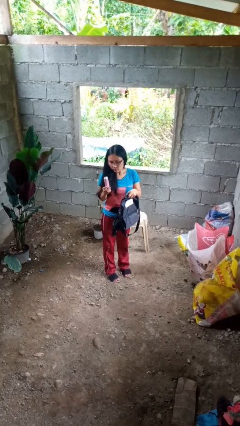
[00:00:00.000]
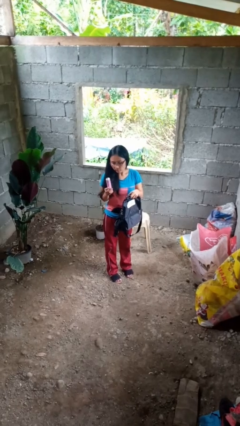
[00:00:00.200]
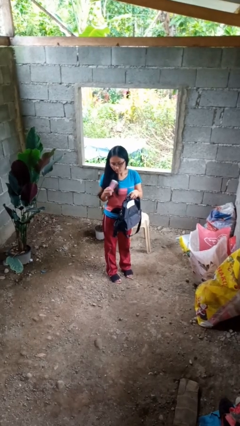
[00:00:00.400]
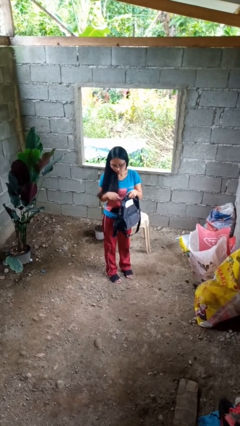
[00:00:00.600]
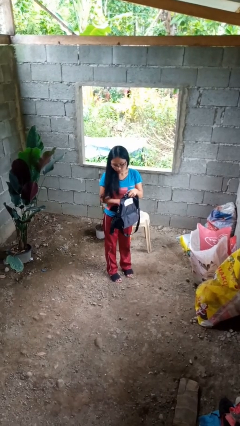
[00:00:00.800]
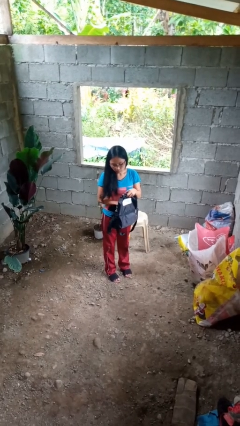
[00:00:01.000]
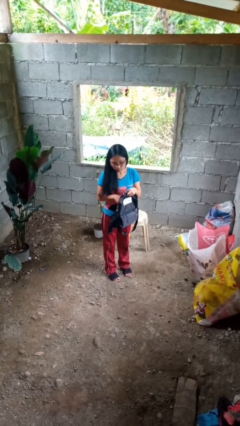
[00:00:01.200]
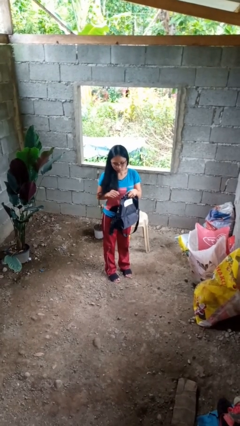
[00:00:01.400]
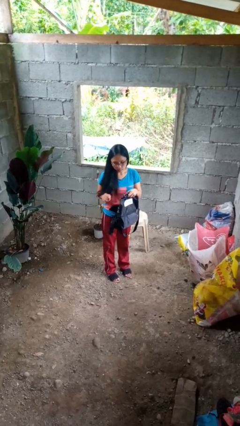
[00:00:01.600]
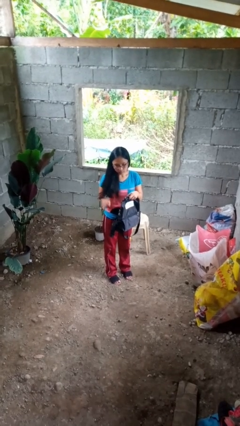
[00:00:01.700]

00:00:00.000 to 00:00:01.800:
person puts object into backpack

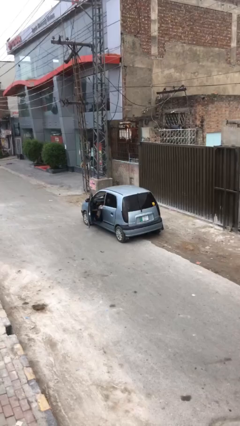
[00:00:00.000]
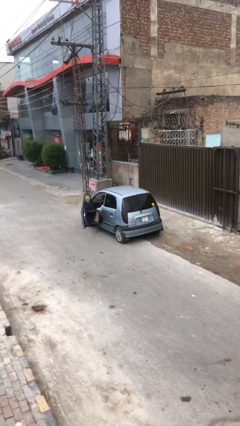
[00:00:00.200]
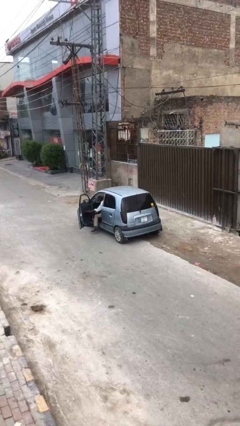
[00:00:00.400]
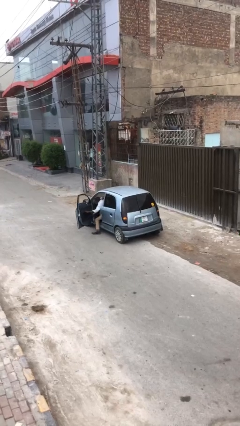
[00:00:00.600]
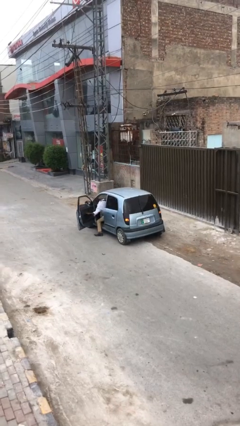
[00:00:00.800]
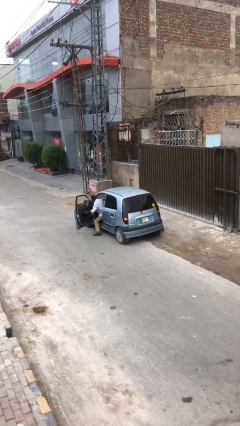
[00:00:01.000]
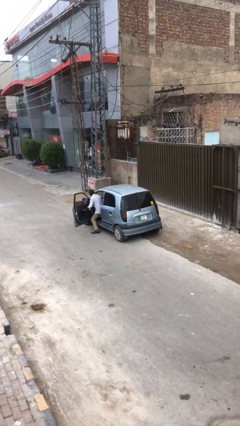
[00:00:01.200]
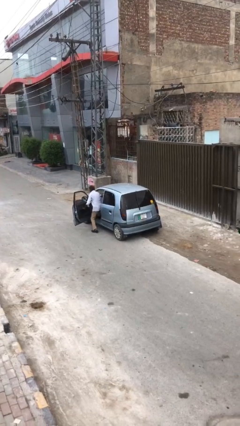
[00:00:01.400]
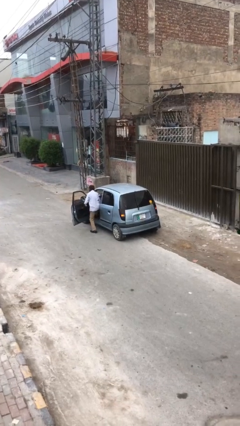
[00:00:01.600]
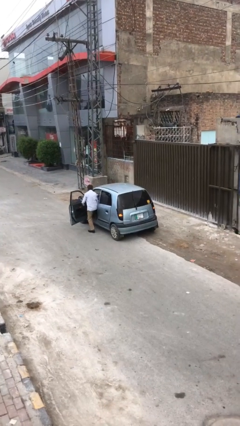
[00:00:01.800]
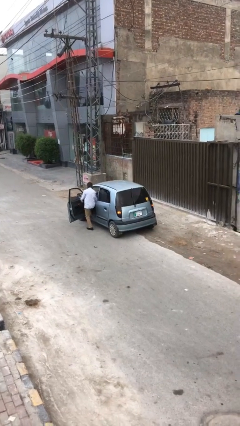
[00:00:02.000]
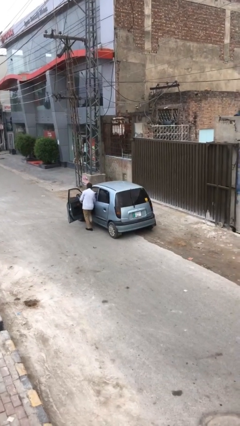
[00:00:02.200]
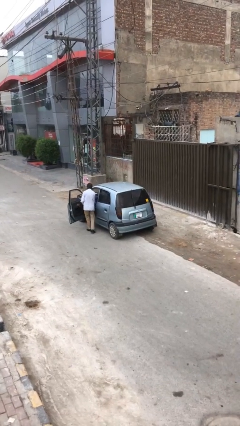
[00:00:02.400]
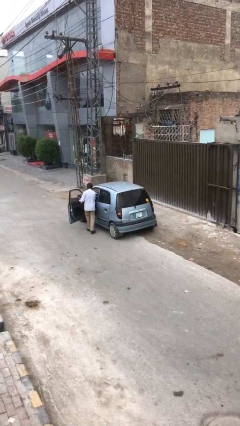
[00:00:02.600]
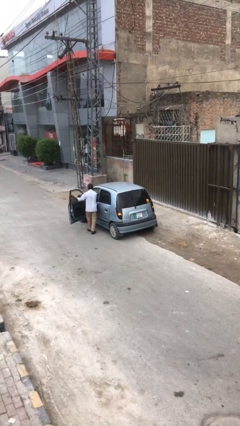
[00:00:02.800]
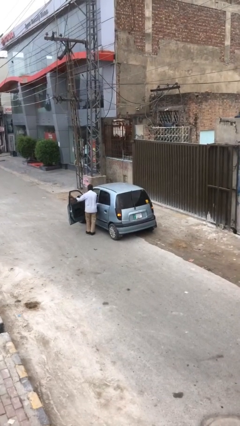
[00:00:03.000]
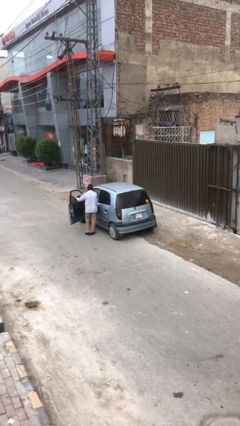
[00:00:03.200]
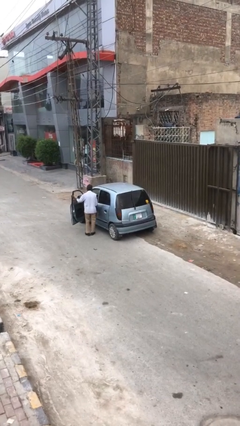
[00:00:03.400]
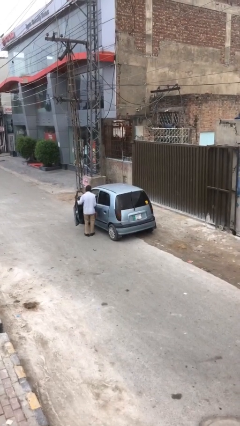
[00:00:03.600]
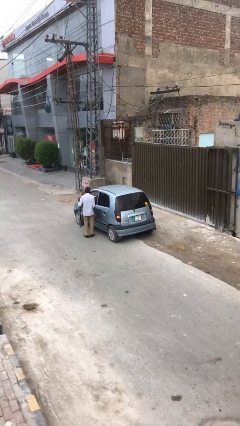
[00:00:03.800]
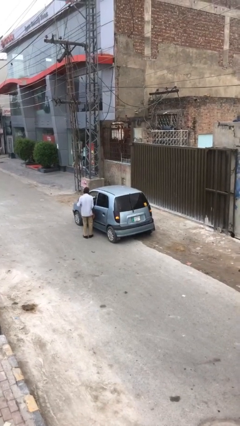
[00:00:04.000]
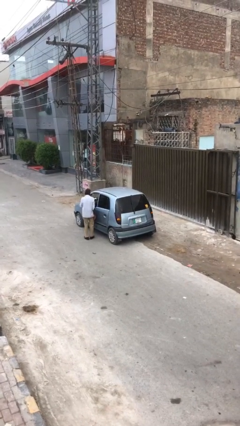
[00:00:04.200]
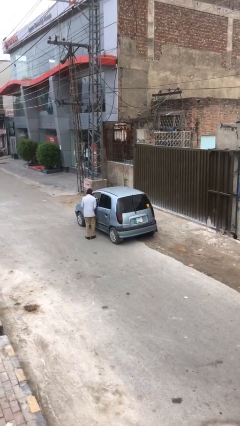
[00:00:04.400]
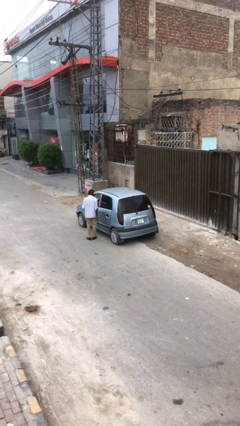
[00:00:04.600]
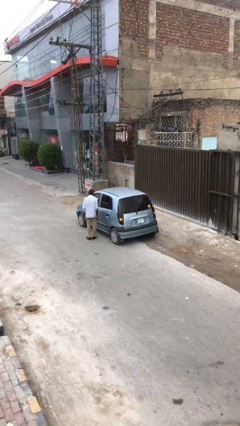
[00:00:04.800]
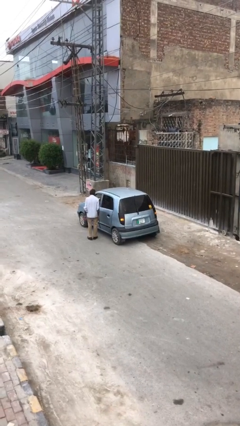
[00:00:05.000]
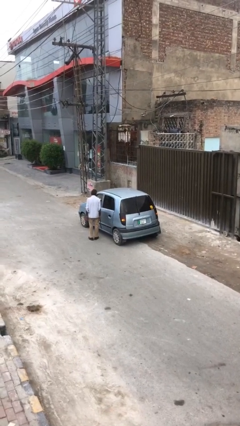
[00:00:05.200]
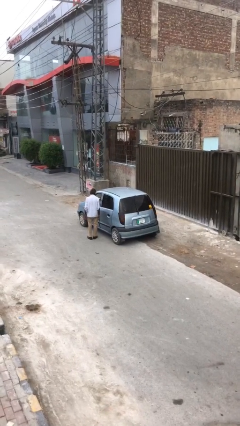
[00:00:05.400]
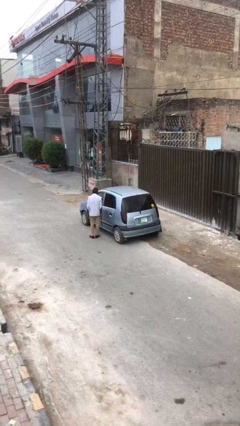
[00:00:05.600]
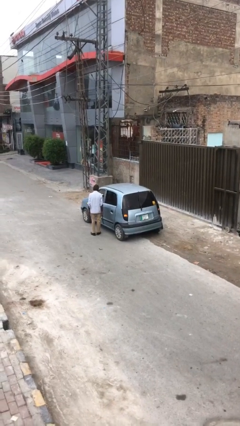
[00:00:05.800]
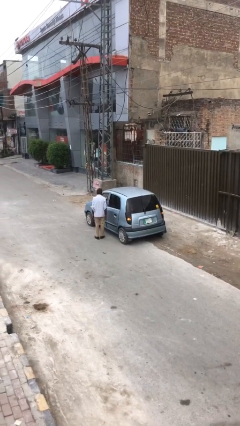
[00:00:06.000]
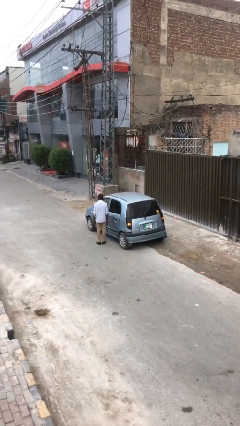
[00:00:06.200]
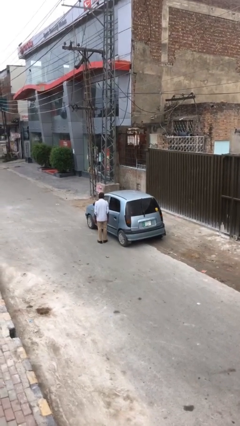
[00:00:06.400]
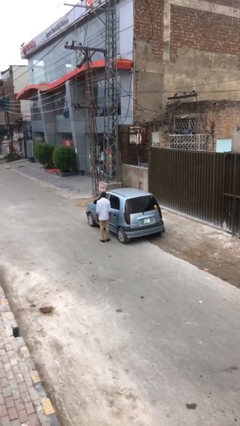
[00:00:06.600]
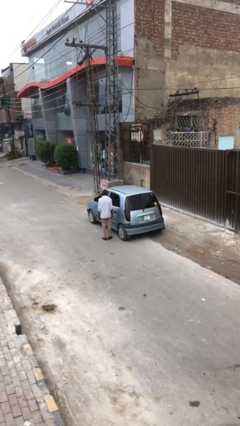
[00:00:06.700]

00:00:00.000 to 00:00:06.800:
car drops off person

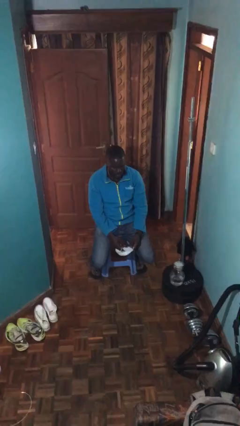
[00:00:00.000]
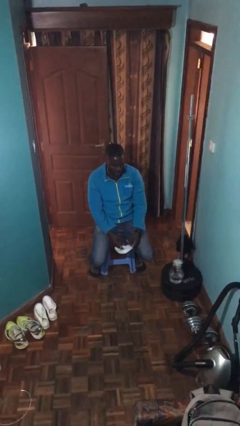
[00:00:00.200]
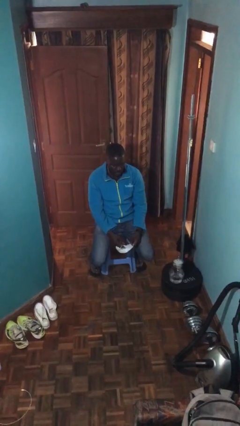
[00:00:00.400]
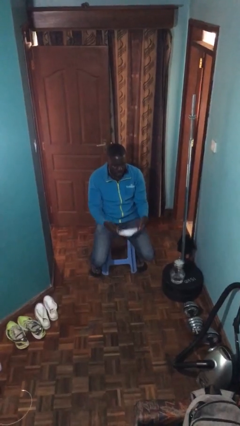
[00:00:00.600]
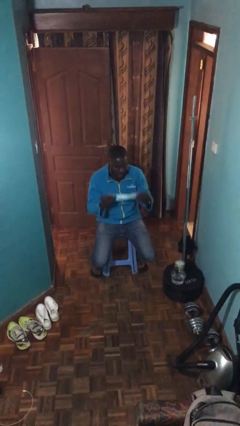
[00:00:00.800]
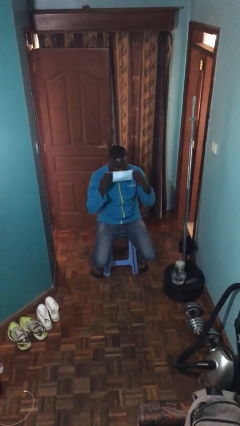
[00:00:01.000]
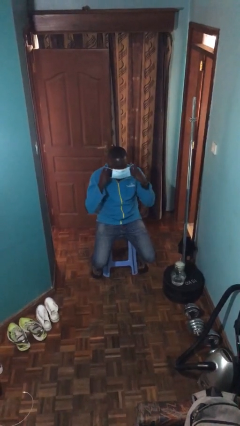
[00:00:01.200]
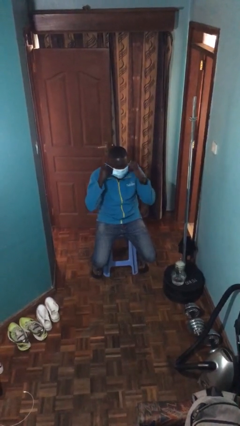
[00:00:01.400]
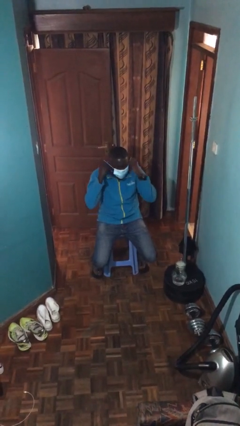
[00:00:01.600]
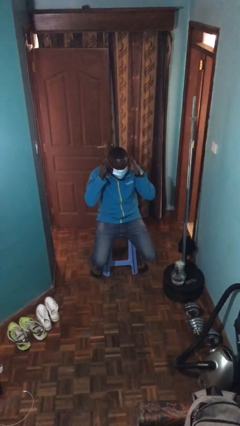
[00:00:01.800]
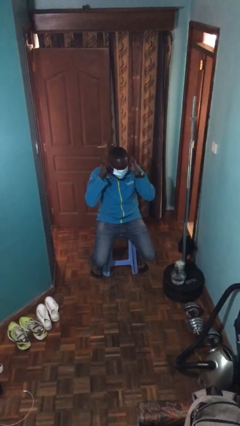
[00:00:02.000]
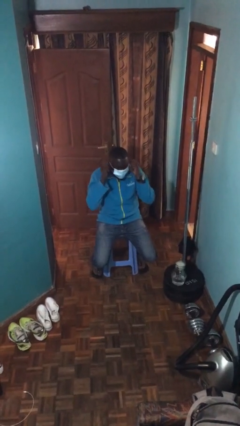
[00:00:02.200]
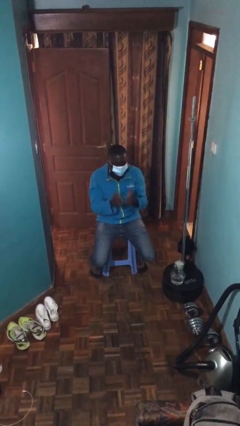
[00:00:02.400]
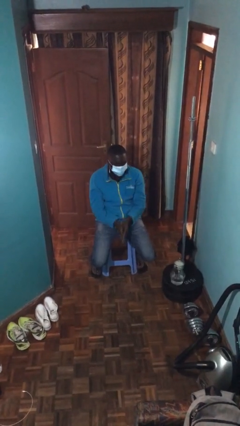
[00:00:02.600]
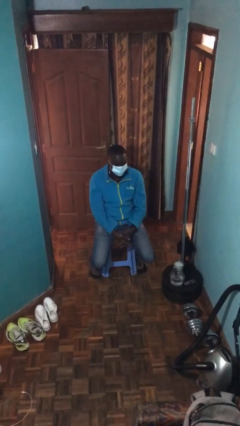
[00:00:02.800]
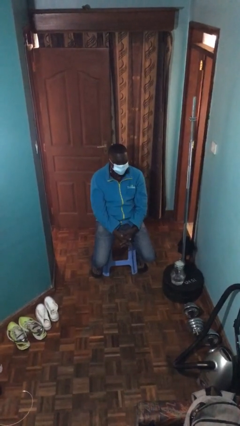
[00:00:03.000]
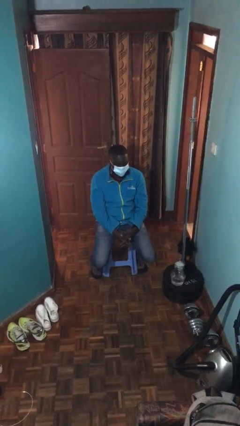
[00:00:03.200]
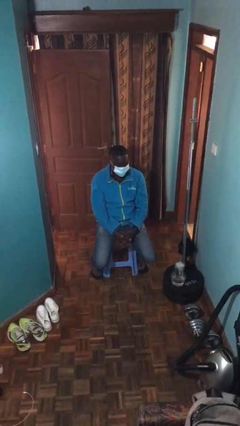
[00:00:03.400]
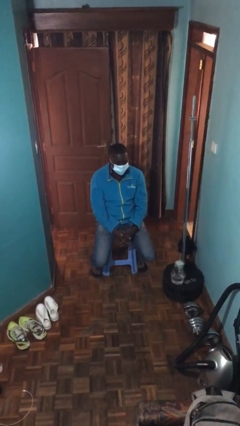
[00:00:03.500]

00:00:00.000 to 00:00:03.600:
person puts on facemask

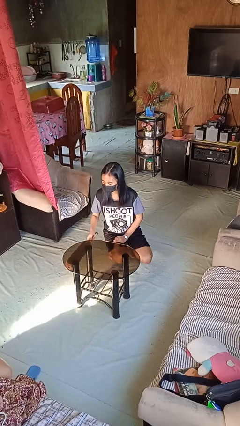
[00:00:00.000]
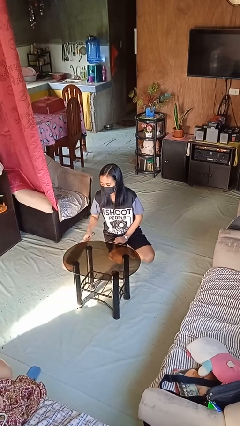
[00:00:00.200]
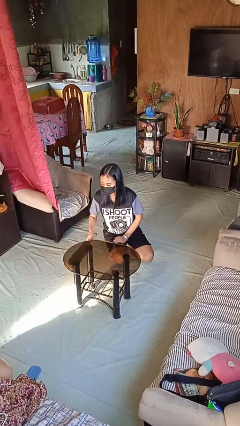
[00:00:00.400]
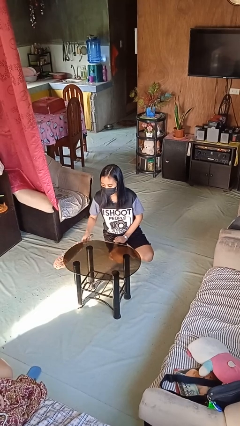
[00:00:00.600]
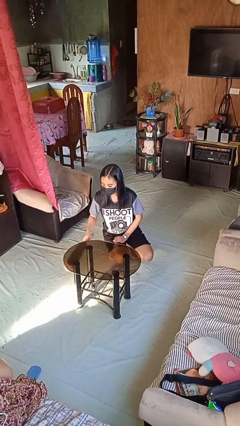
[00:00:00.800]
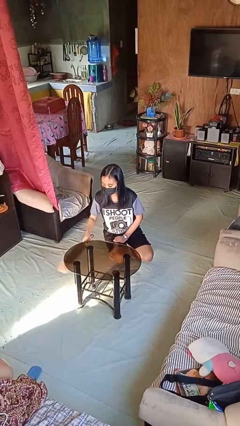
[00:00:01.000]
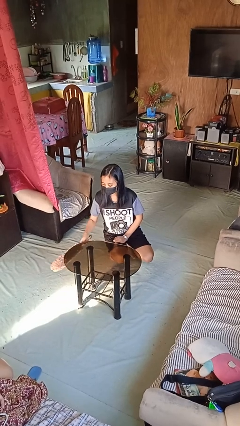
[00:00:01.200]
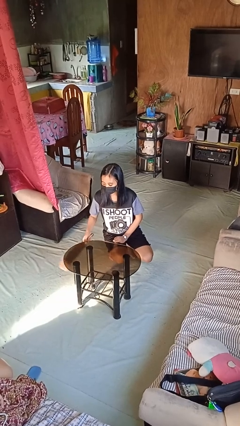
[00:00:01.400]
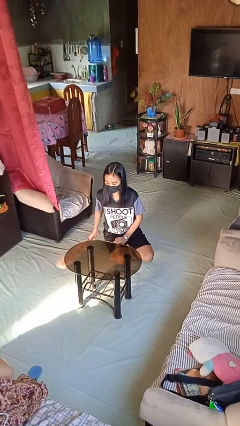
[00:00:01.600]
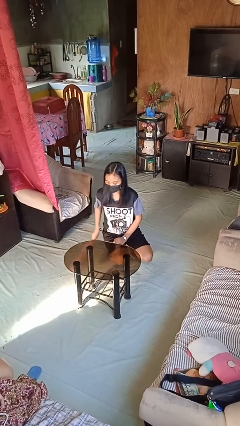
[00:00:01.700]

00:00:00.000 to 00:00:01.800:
person dusts furniture

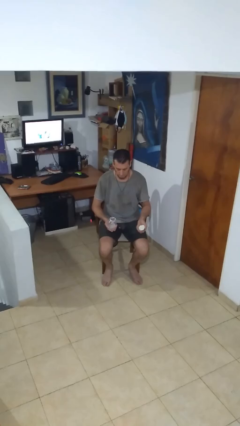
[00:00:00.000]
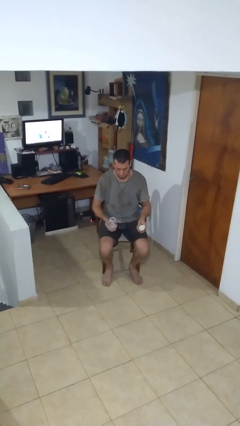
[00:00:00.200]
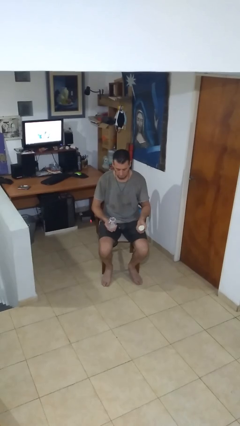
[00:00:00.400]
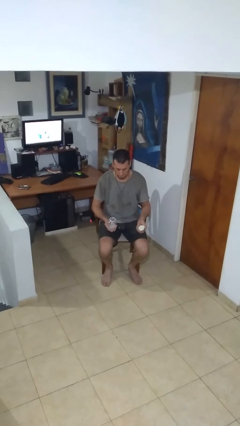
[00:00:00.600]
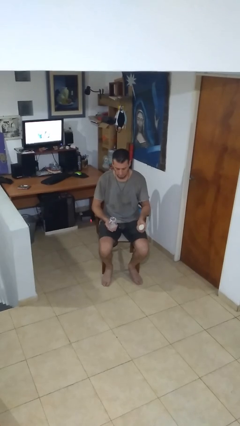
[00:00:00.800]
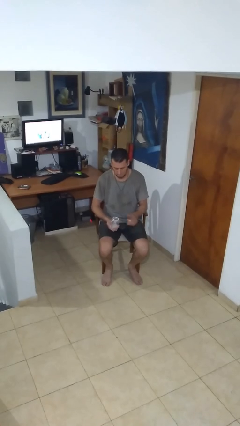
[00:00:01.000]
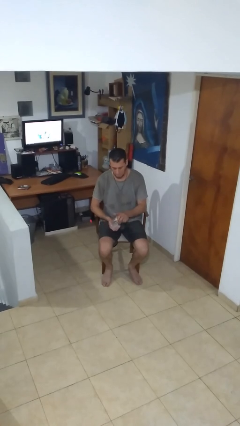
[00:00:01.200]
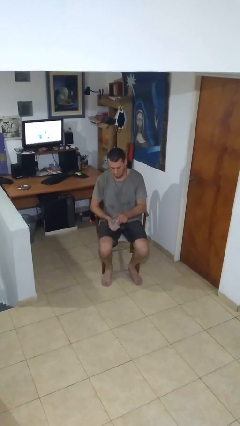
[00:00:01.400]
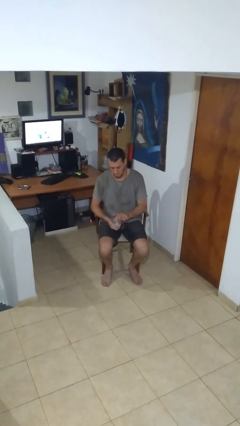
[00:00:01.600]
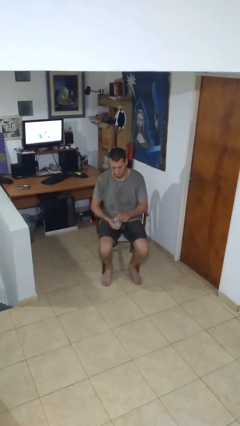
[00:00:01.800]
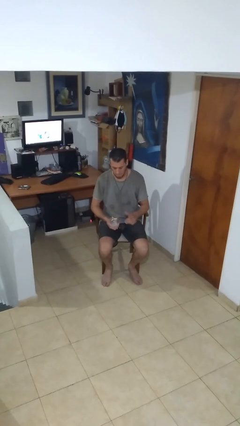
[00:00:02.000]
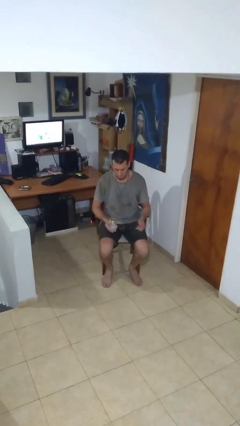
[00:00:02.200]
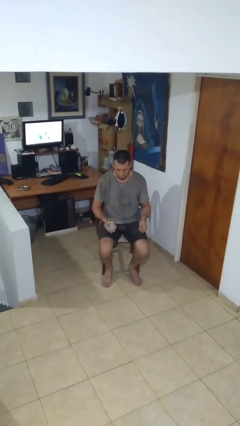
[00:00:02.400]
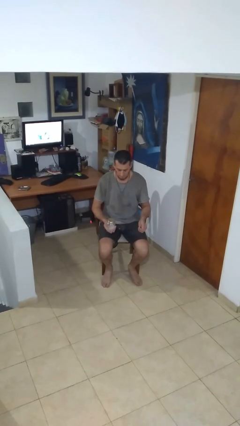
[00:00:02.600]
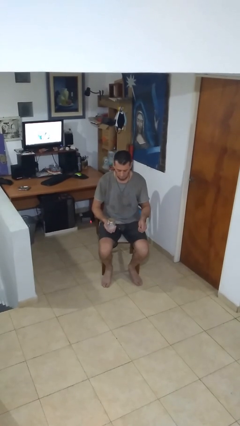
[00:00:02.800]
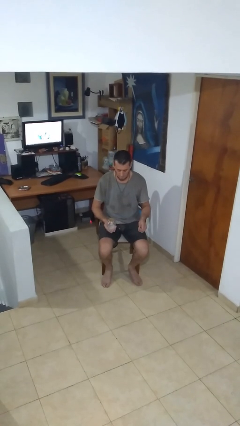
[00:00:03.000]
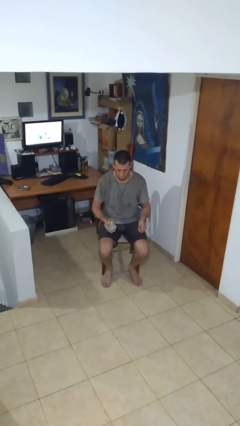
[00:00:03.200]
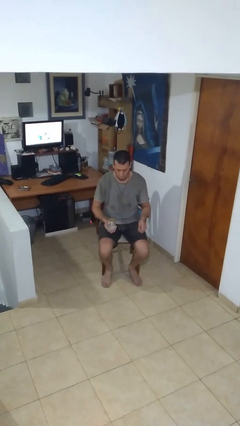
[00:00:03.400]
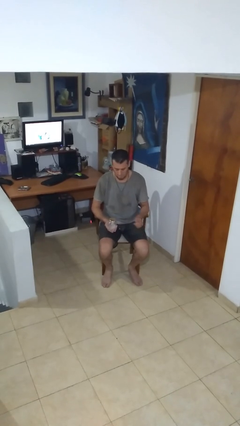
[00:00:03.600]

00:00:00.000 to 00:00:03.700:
person closes jar
